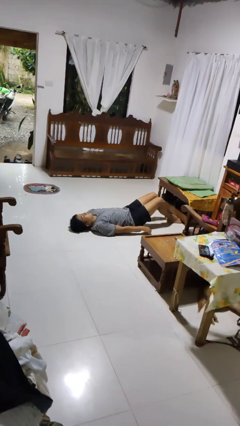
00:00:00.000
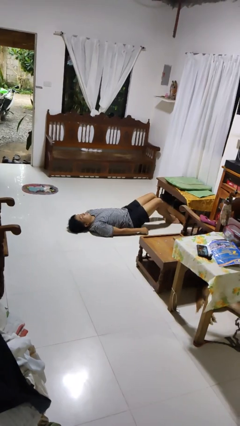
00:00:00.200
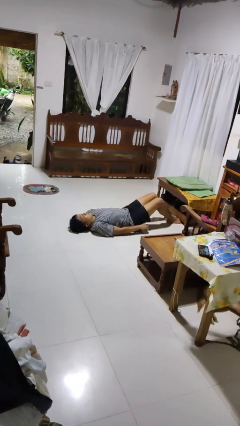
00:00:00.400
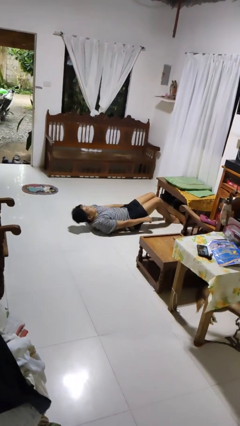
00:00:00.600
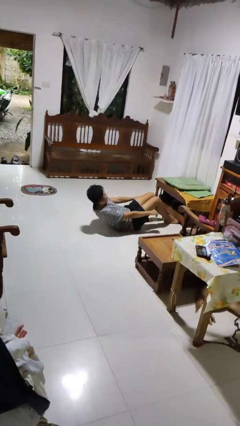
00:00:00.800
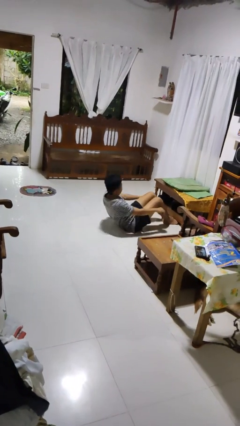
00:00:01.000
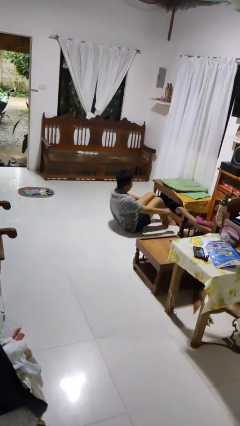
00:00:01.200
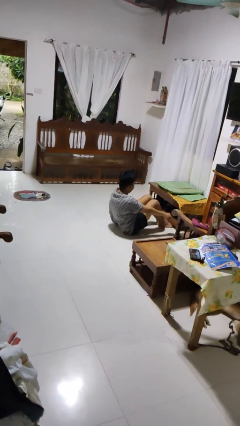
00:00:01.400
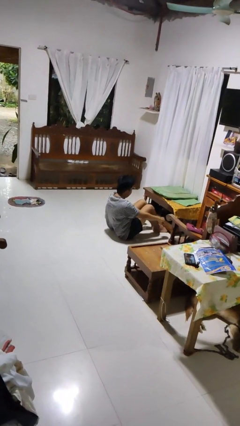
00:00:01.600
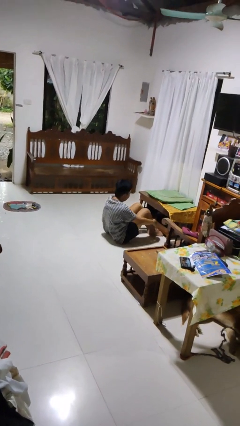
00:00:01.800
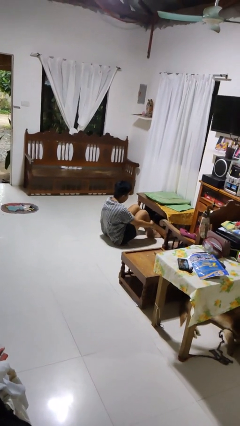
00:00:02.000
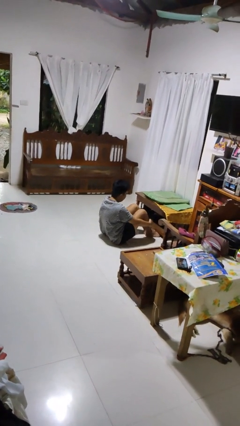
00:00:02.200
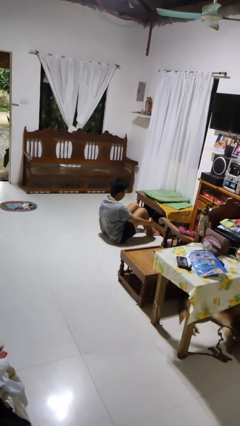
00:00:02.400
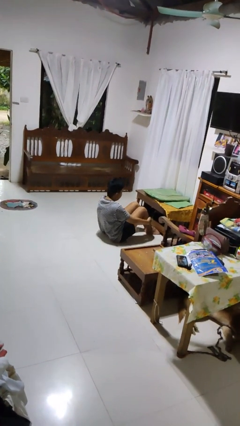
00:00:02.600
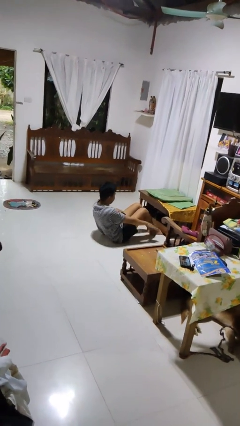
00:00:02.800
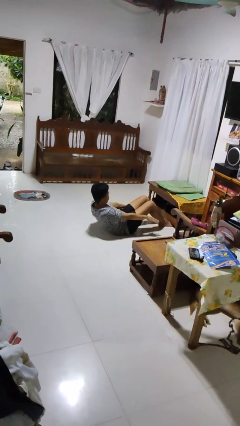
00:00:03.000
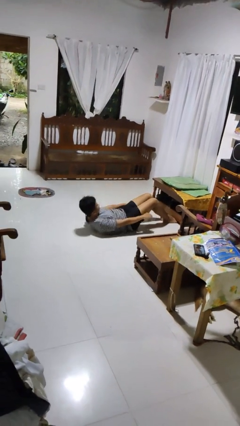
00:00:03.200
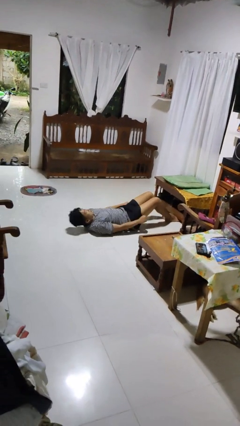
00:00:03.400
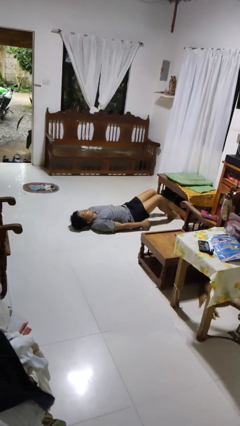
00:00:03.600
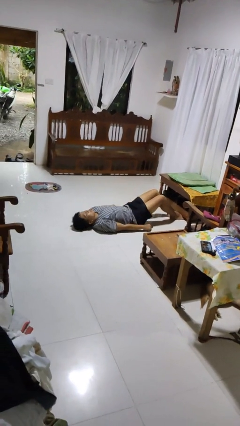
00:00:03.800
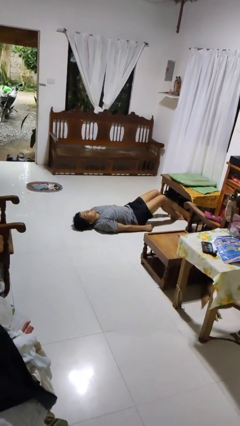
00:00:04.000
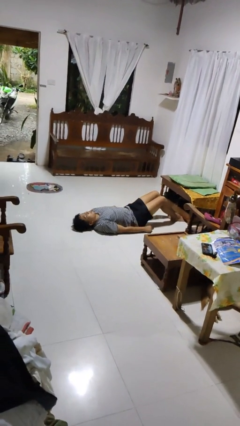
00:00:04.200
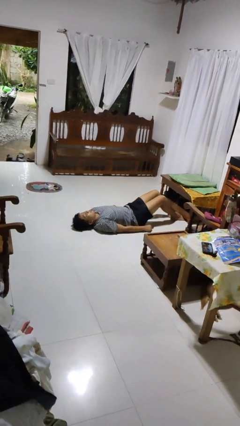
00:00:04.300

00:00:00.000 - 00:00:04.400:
person exercises with situp

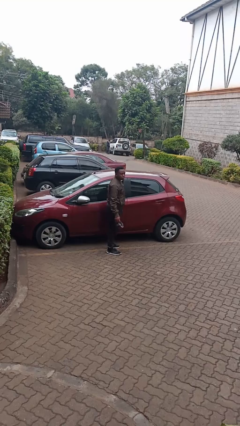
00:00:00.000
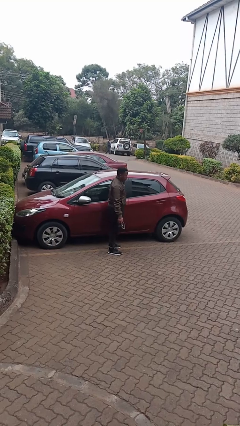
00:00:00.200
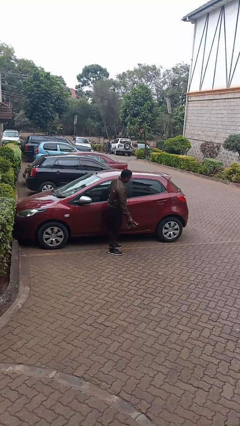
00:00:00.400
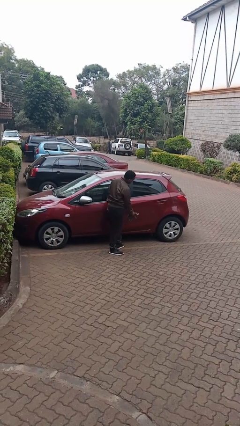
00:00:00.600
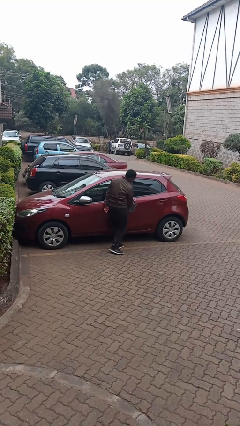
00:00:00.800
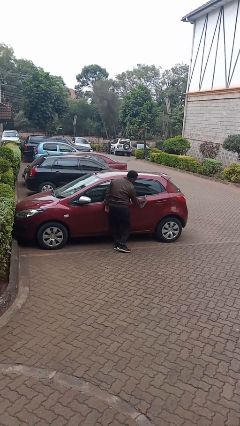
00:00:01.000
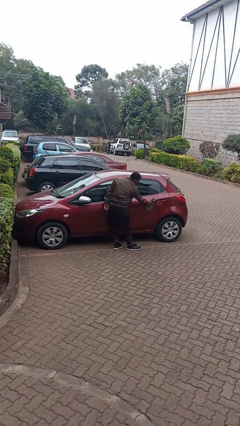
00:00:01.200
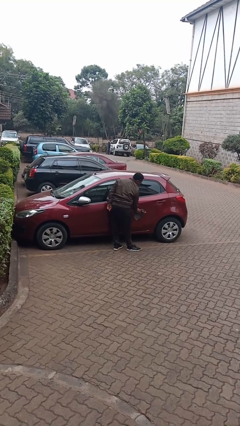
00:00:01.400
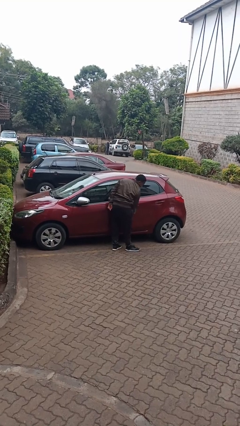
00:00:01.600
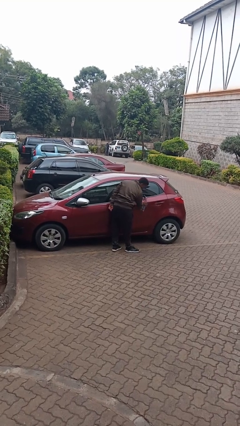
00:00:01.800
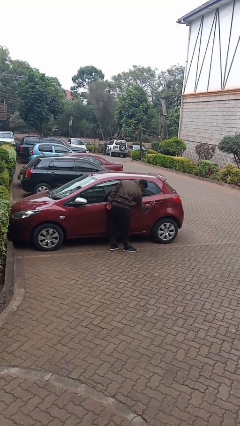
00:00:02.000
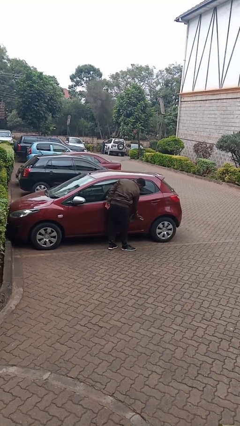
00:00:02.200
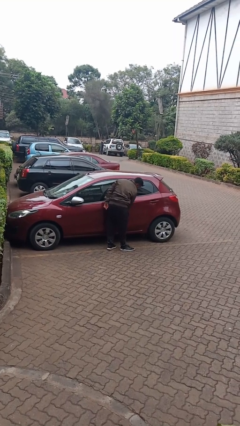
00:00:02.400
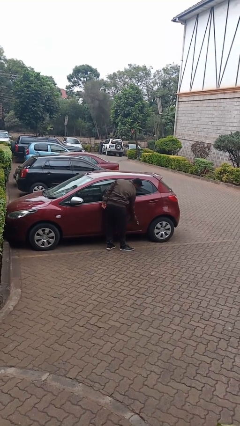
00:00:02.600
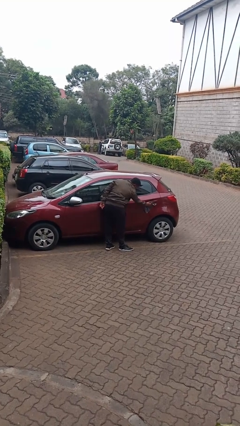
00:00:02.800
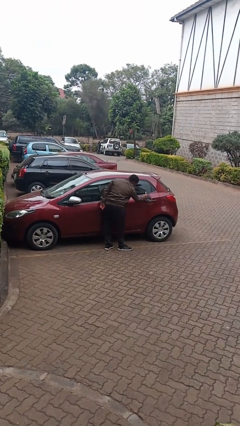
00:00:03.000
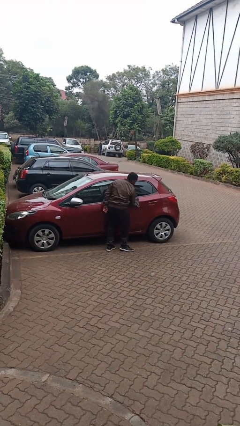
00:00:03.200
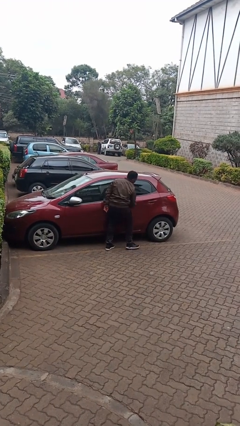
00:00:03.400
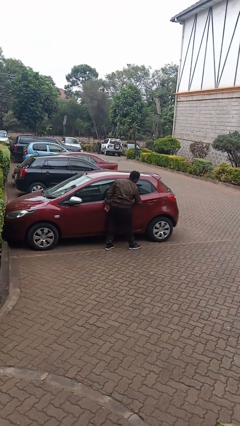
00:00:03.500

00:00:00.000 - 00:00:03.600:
person polishes car with rag

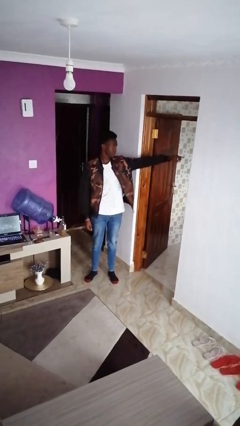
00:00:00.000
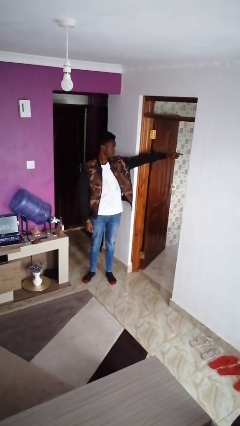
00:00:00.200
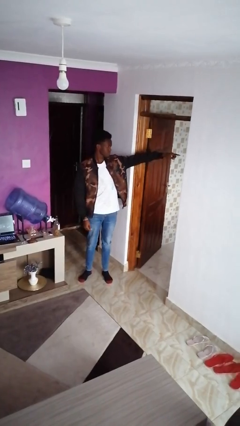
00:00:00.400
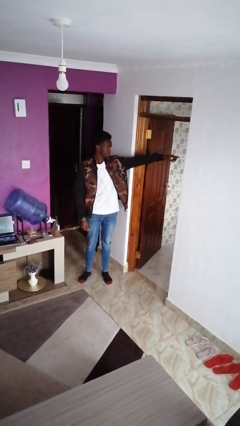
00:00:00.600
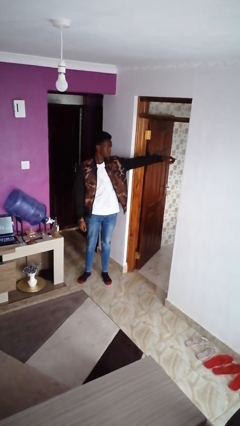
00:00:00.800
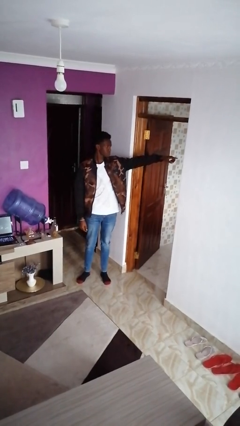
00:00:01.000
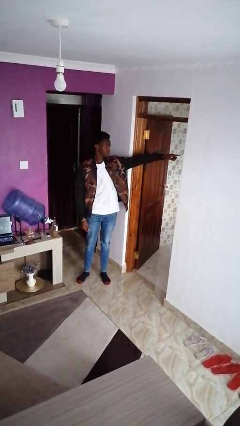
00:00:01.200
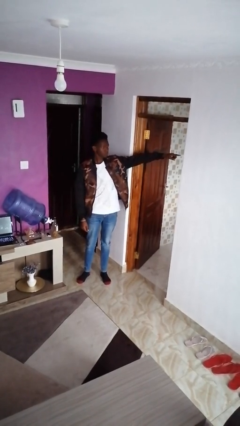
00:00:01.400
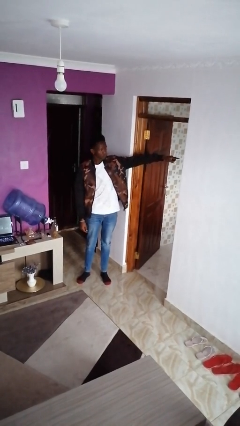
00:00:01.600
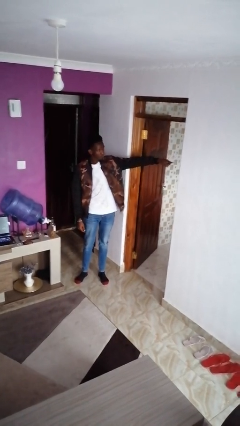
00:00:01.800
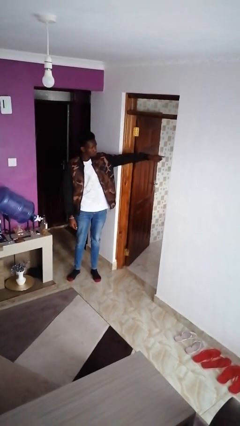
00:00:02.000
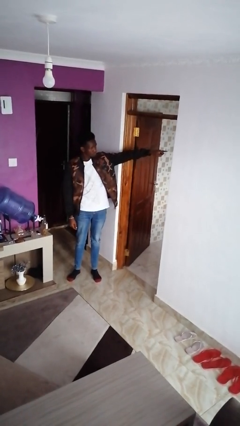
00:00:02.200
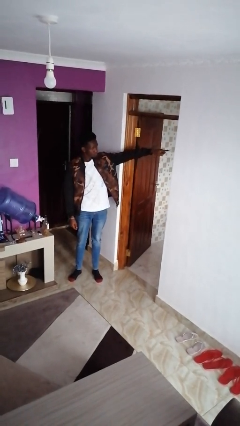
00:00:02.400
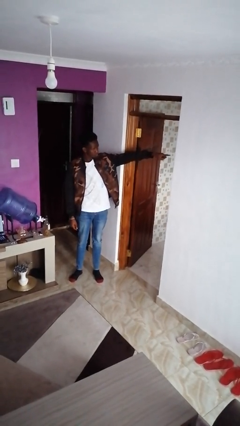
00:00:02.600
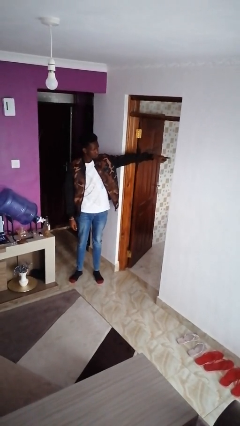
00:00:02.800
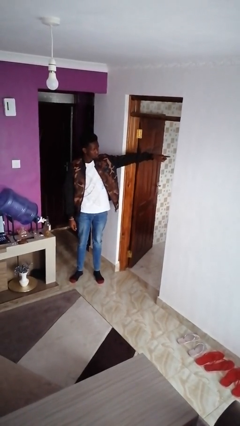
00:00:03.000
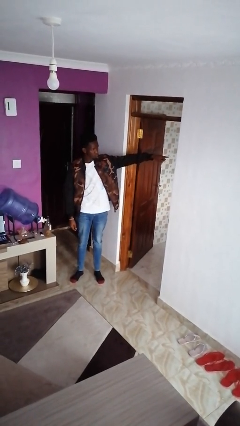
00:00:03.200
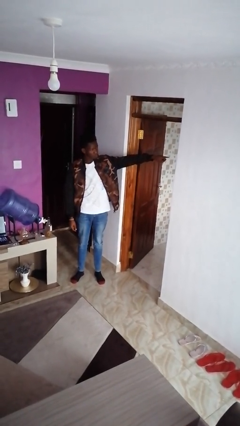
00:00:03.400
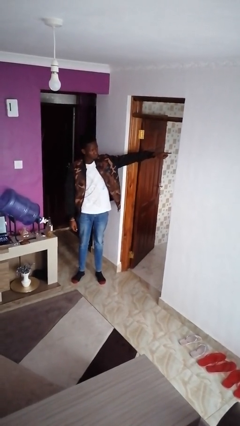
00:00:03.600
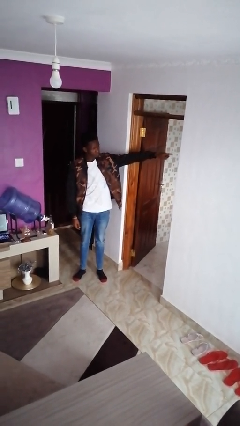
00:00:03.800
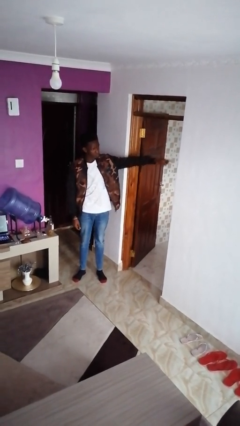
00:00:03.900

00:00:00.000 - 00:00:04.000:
person points at person

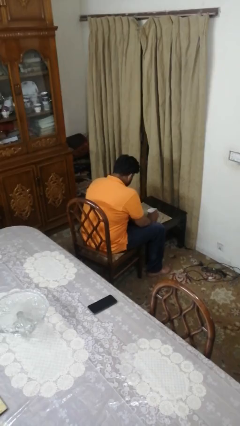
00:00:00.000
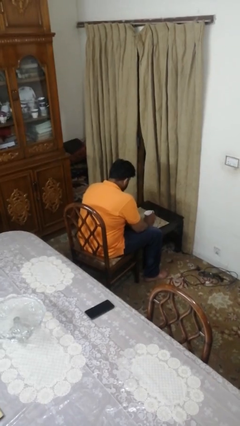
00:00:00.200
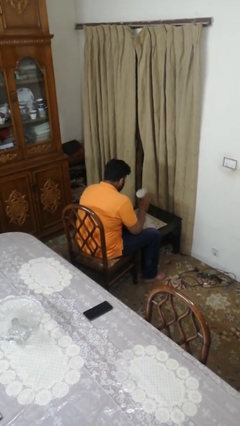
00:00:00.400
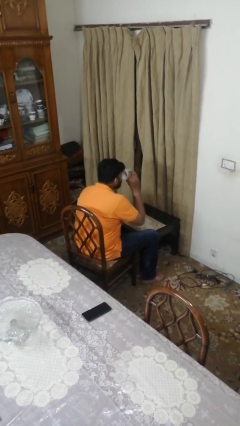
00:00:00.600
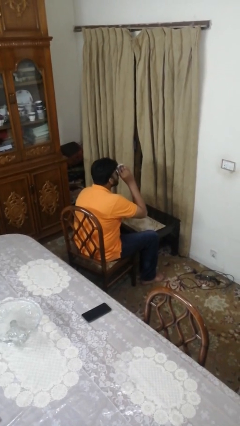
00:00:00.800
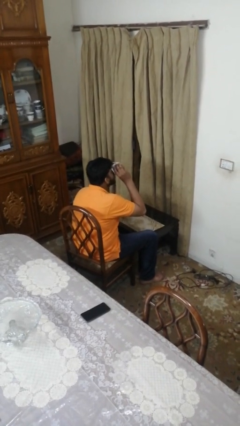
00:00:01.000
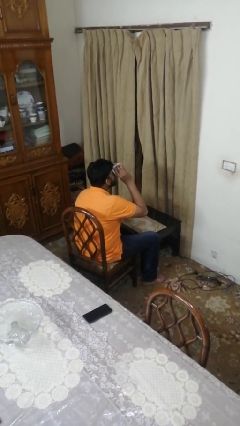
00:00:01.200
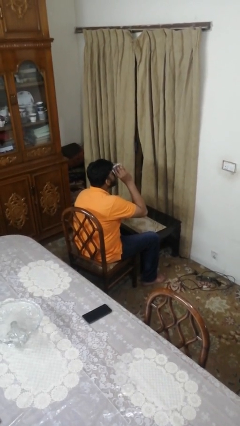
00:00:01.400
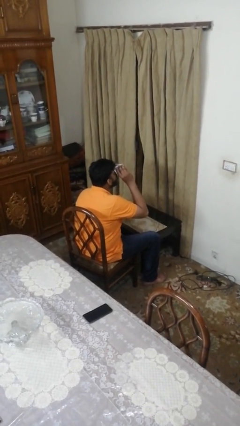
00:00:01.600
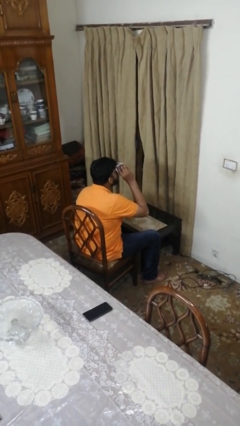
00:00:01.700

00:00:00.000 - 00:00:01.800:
person drinks from mug

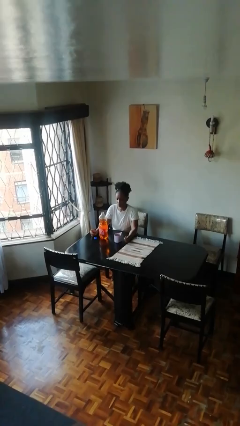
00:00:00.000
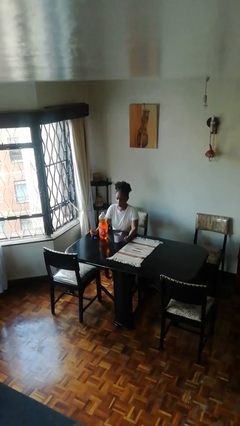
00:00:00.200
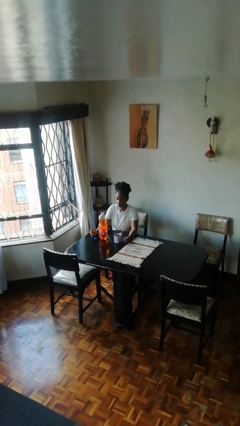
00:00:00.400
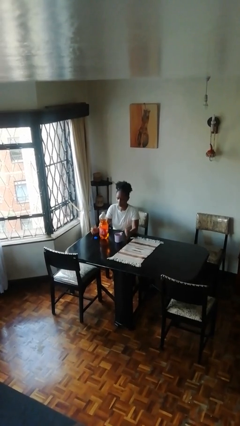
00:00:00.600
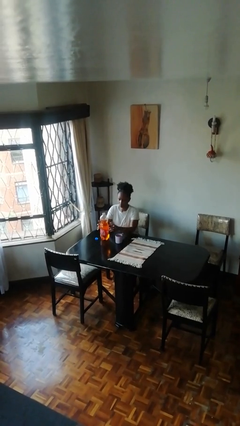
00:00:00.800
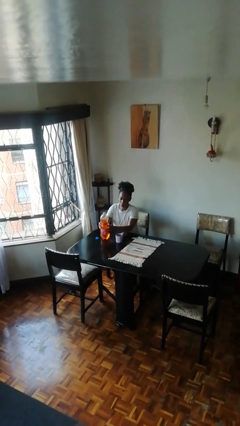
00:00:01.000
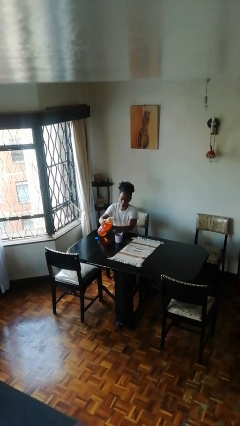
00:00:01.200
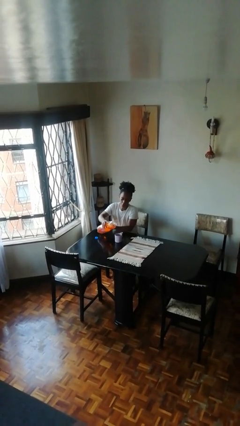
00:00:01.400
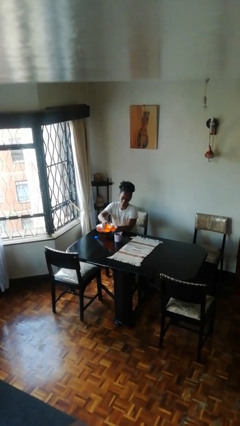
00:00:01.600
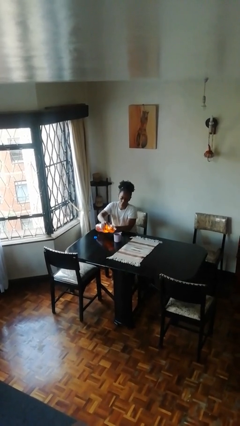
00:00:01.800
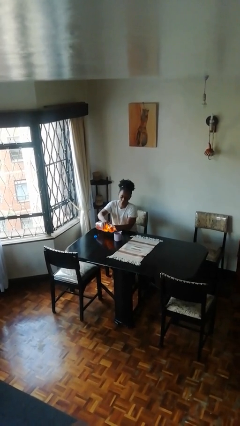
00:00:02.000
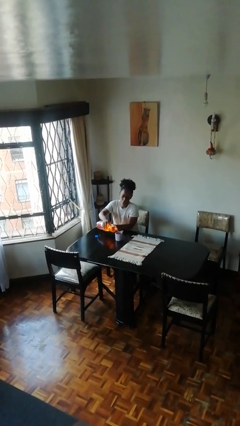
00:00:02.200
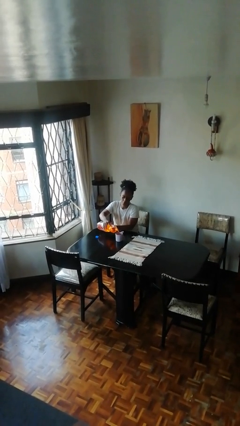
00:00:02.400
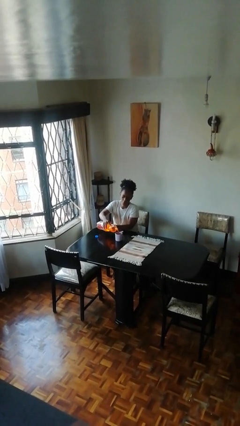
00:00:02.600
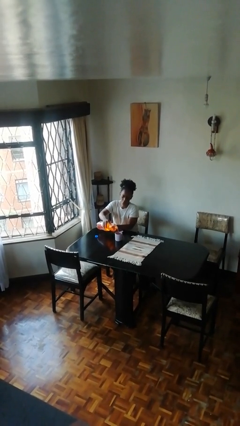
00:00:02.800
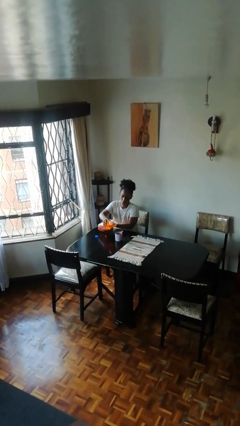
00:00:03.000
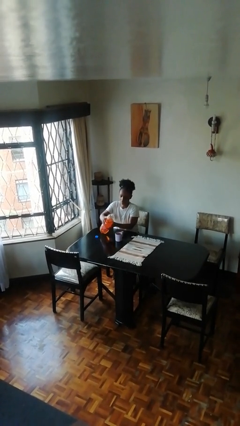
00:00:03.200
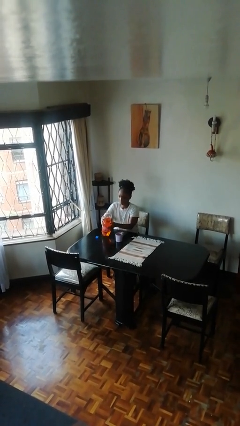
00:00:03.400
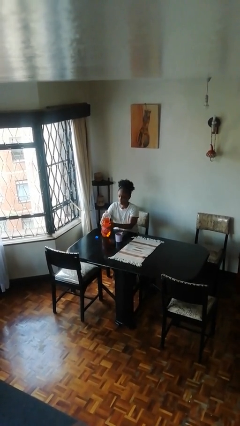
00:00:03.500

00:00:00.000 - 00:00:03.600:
person pours liquid into cup

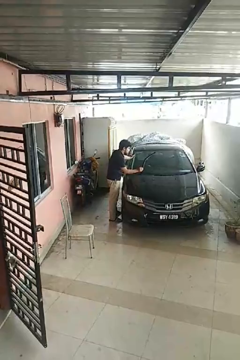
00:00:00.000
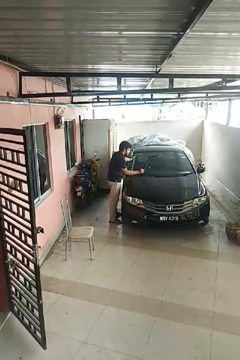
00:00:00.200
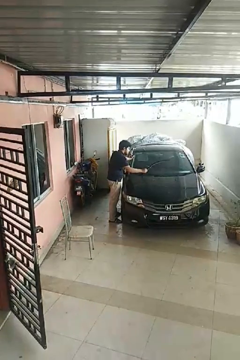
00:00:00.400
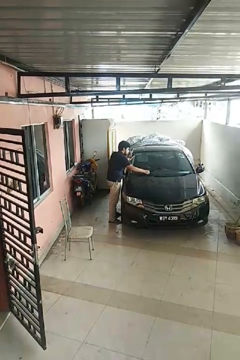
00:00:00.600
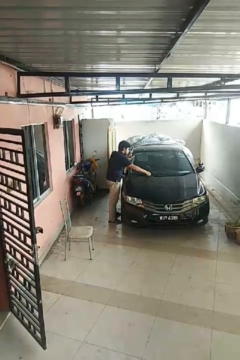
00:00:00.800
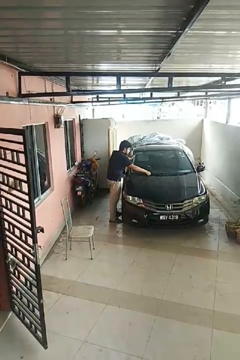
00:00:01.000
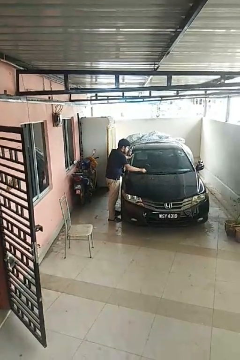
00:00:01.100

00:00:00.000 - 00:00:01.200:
person flips down car wipers
